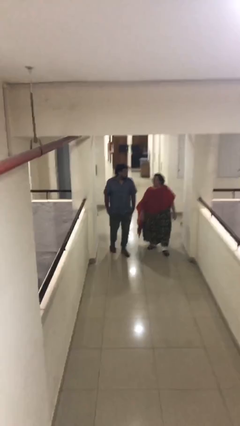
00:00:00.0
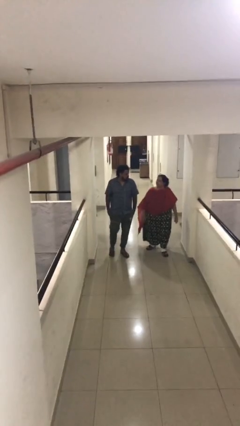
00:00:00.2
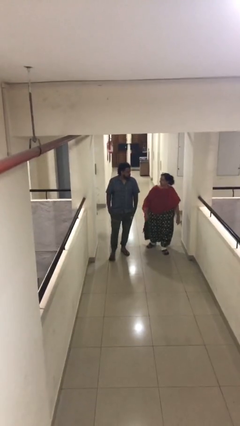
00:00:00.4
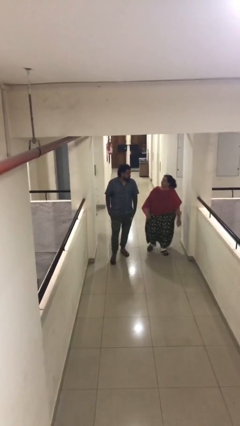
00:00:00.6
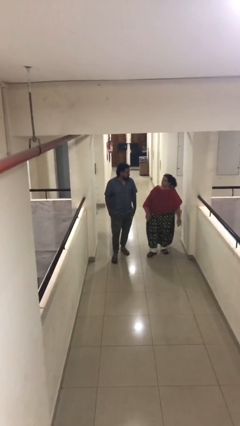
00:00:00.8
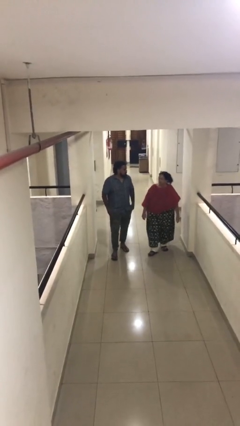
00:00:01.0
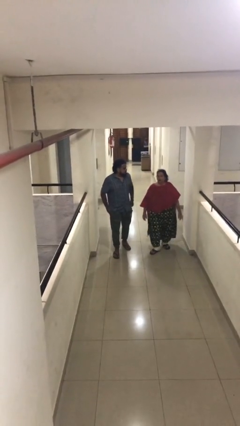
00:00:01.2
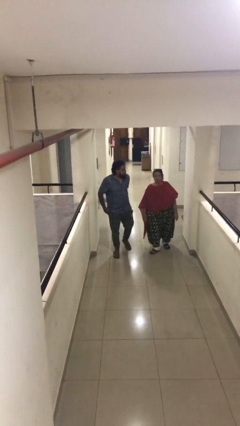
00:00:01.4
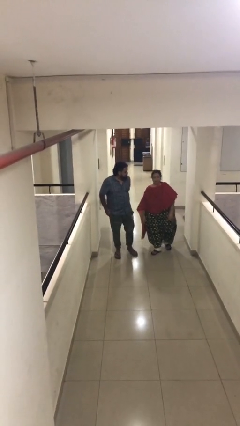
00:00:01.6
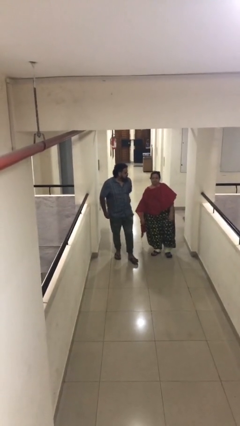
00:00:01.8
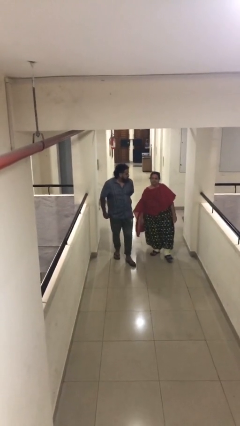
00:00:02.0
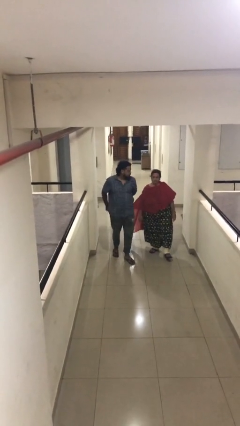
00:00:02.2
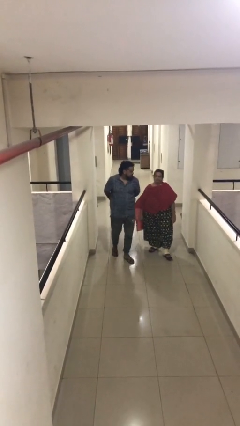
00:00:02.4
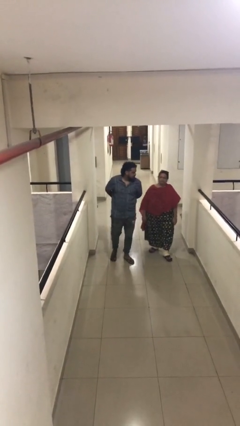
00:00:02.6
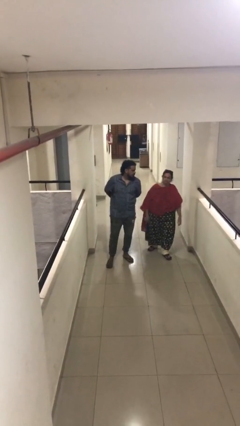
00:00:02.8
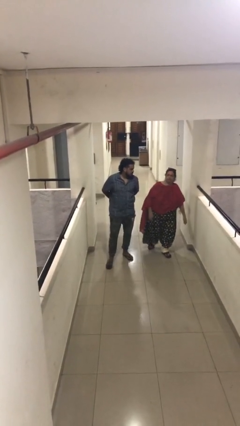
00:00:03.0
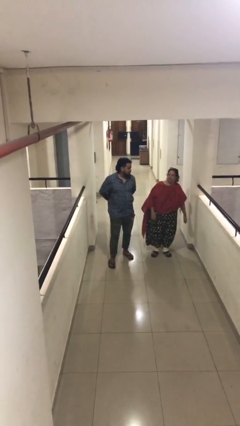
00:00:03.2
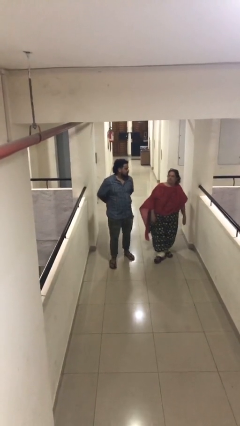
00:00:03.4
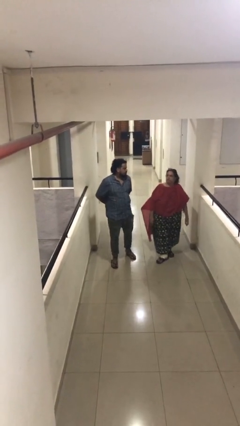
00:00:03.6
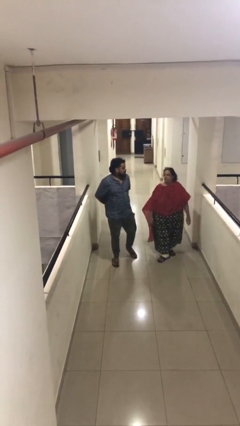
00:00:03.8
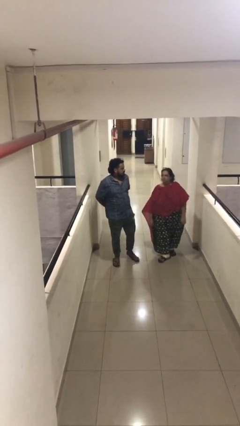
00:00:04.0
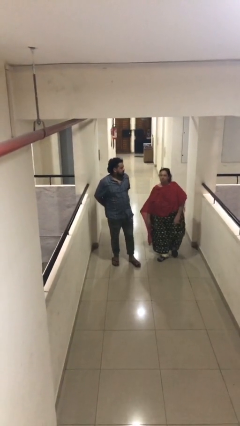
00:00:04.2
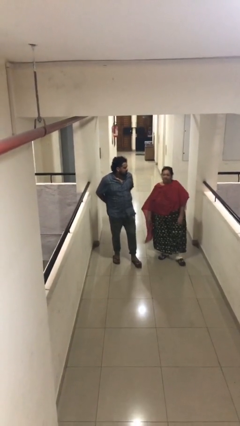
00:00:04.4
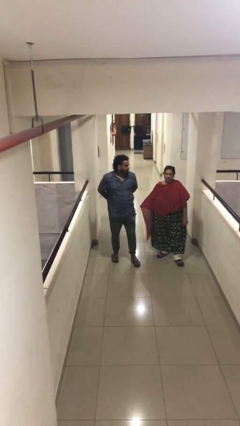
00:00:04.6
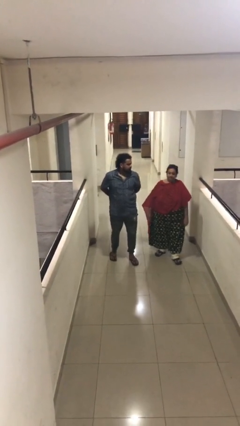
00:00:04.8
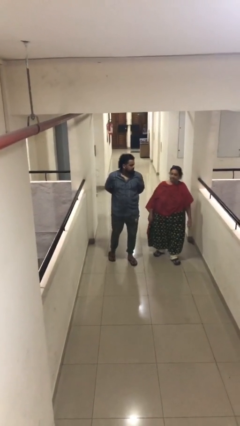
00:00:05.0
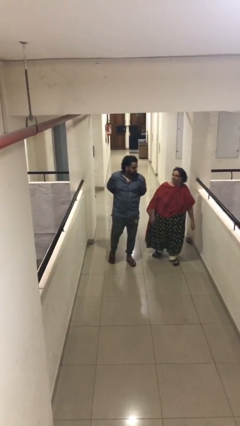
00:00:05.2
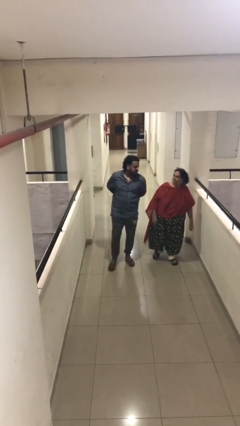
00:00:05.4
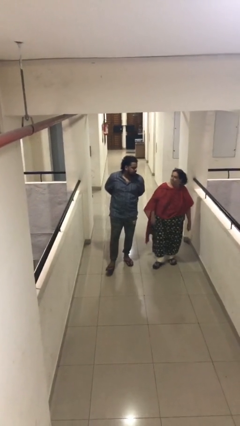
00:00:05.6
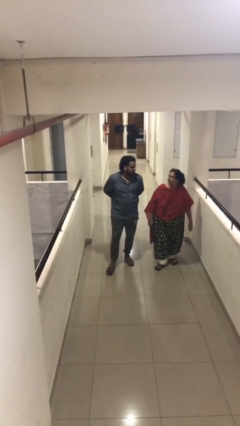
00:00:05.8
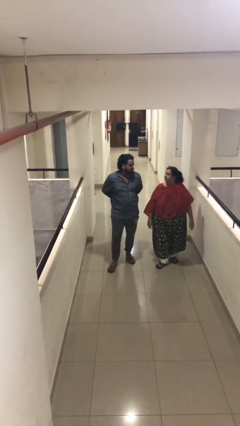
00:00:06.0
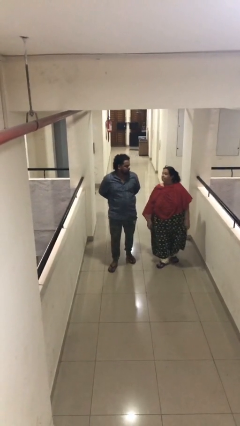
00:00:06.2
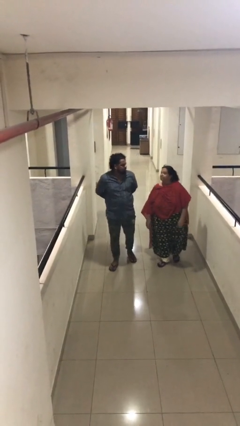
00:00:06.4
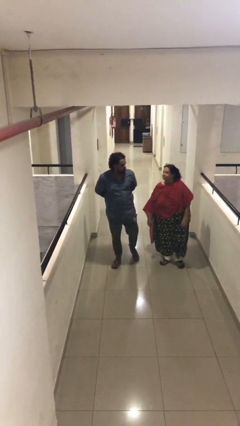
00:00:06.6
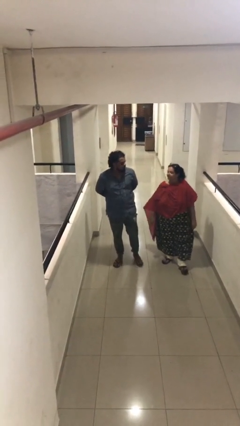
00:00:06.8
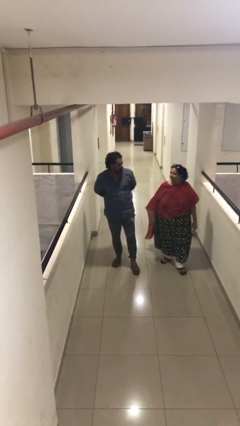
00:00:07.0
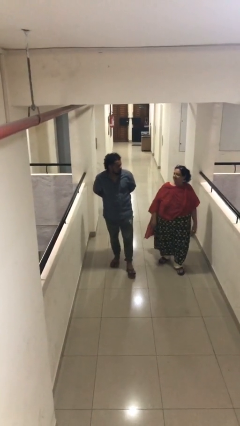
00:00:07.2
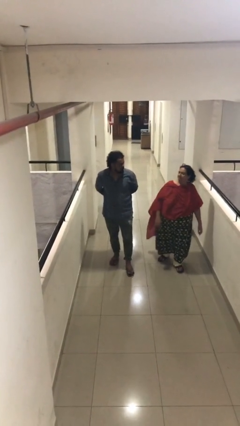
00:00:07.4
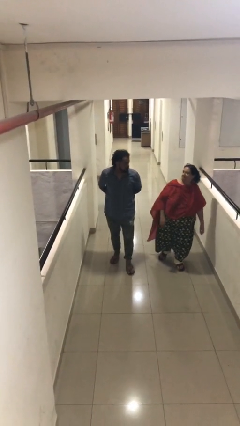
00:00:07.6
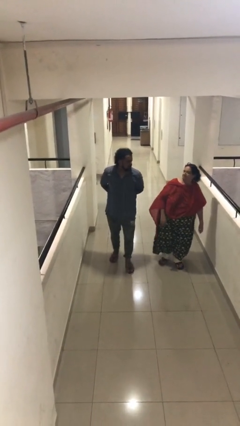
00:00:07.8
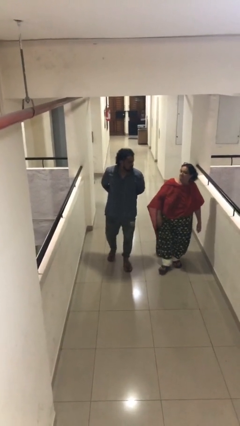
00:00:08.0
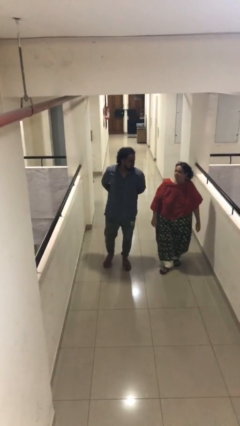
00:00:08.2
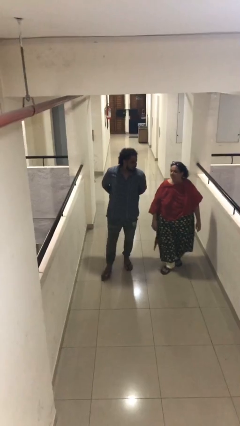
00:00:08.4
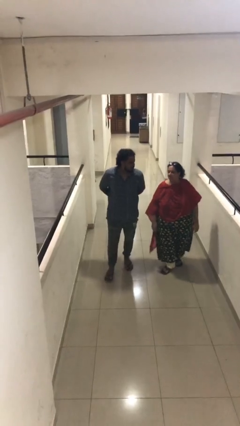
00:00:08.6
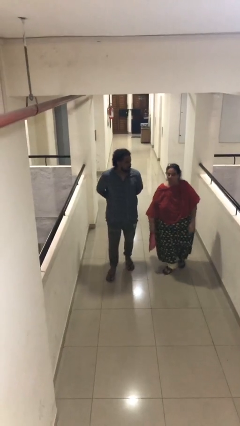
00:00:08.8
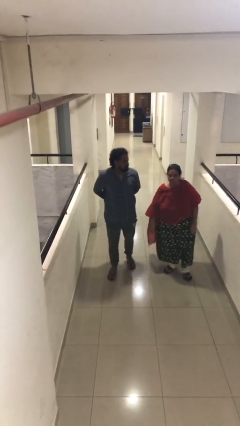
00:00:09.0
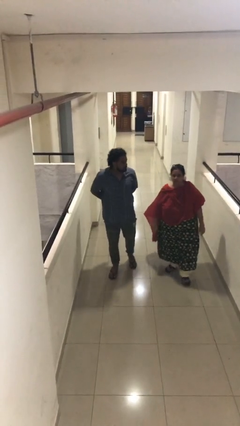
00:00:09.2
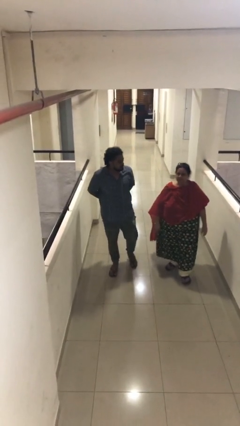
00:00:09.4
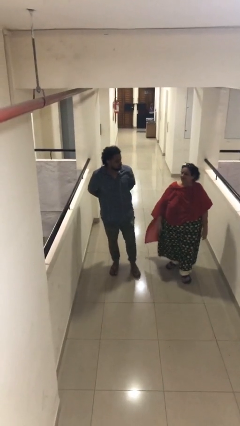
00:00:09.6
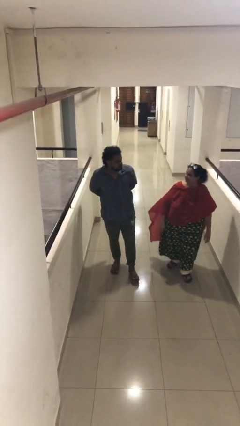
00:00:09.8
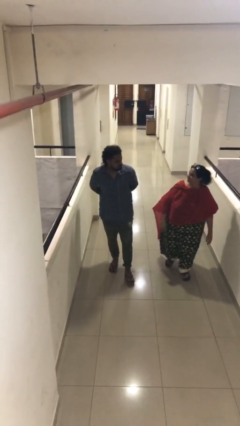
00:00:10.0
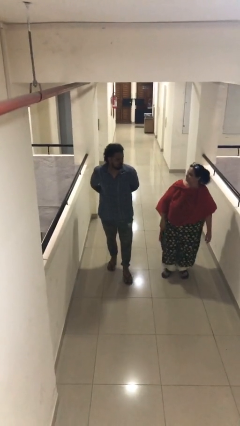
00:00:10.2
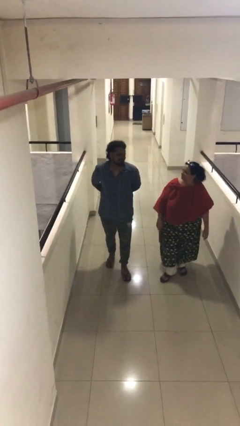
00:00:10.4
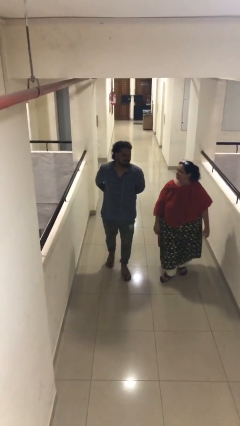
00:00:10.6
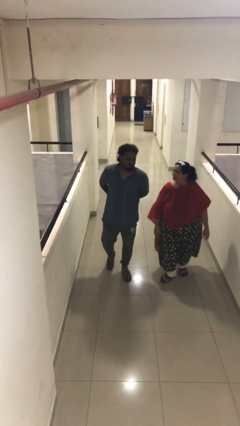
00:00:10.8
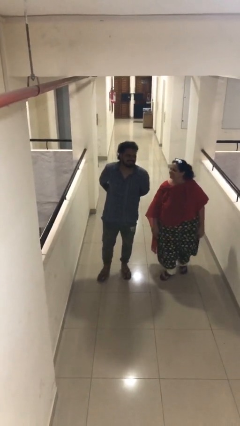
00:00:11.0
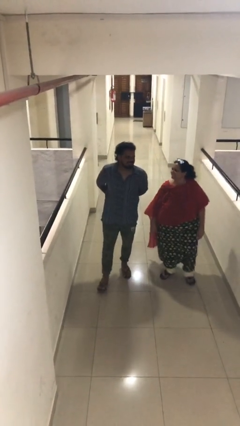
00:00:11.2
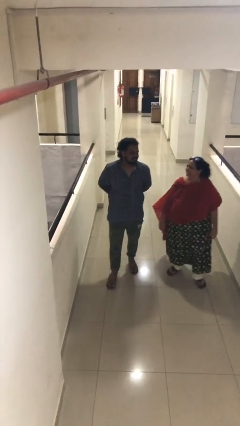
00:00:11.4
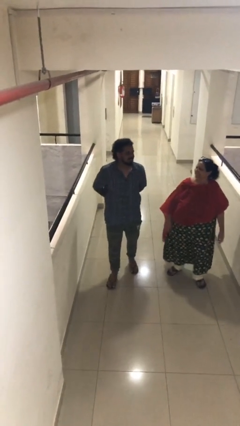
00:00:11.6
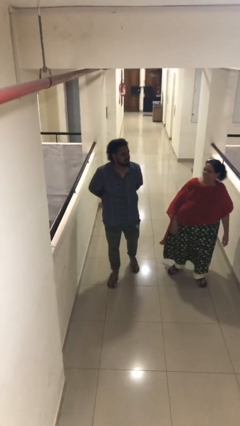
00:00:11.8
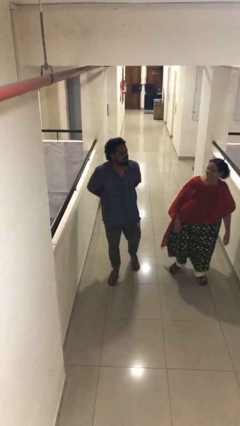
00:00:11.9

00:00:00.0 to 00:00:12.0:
person talks to person

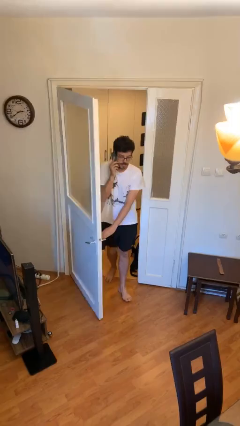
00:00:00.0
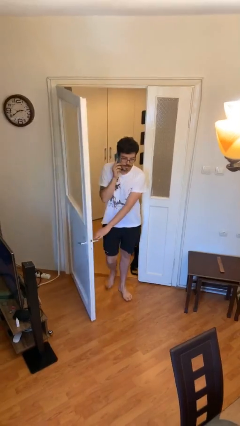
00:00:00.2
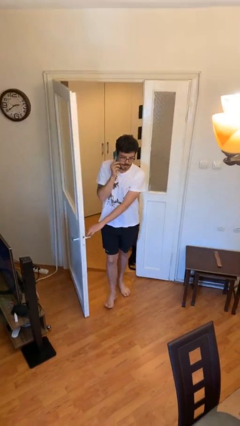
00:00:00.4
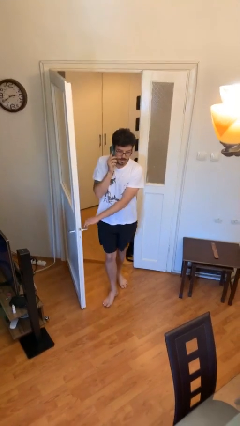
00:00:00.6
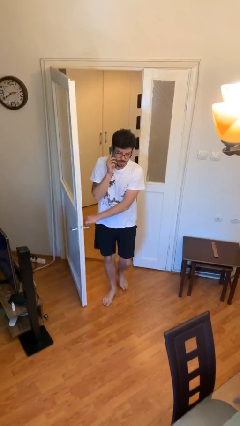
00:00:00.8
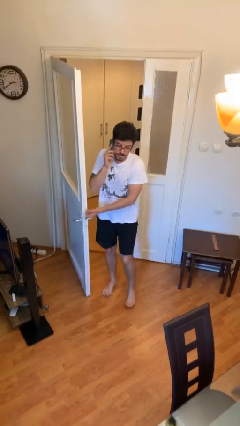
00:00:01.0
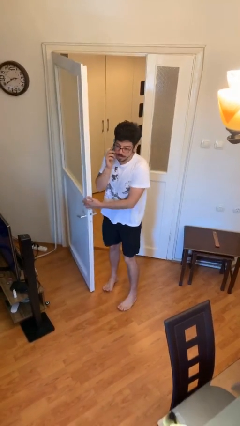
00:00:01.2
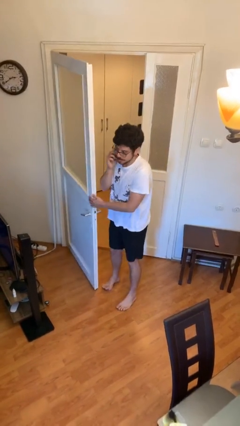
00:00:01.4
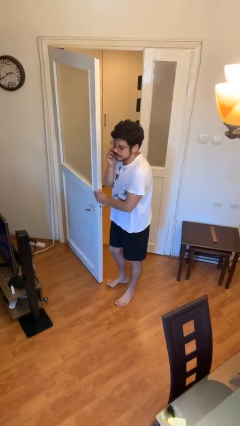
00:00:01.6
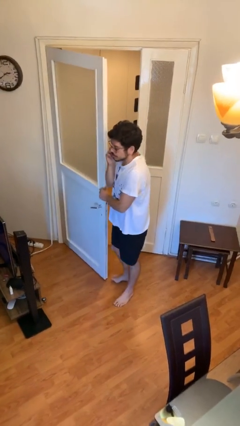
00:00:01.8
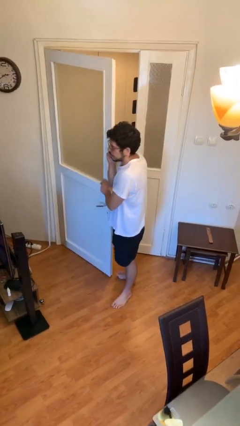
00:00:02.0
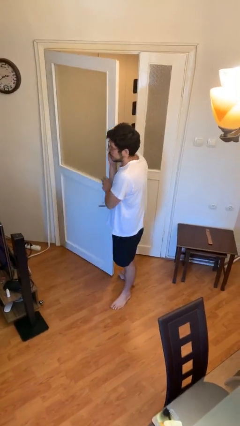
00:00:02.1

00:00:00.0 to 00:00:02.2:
person enters scene through structure

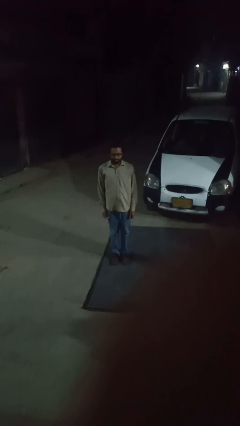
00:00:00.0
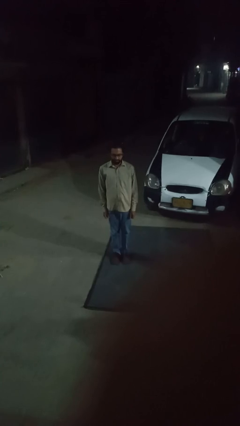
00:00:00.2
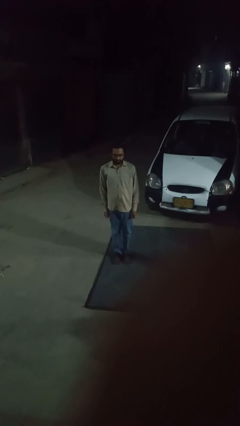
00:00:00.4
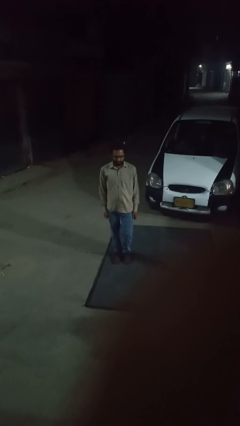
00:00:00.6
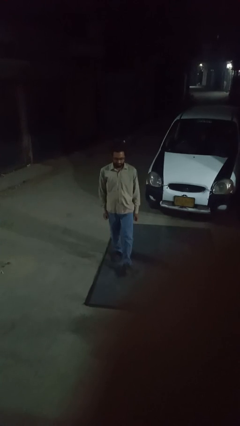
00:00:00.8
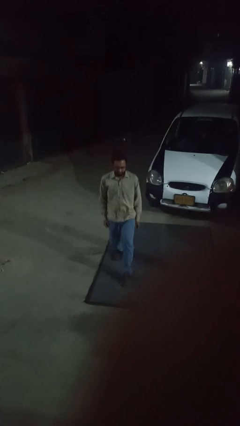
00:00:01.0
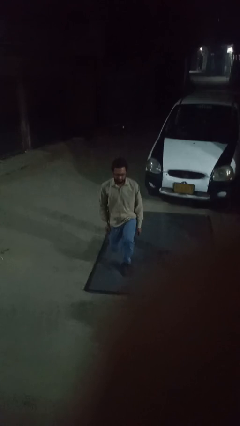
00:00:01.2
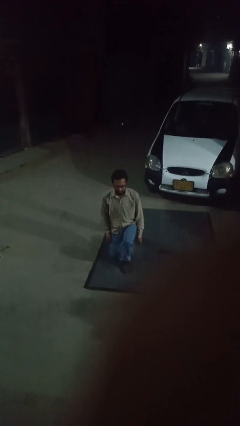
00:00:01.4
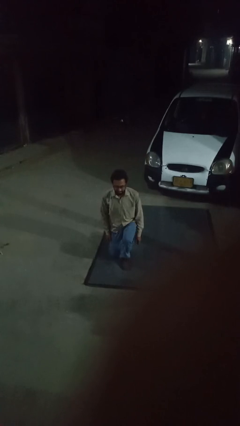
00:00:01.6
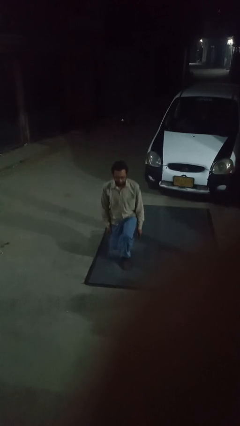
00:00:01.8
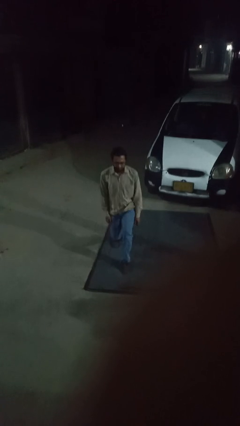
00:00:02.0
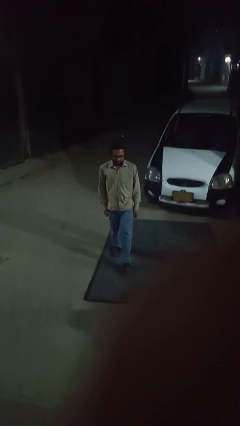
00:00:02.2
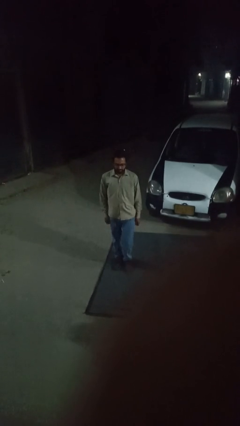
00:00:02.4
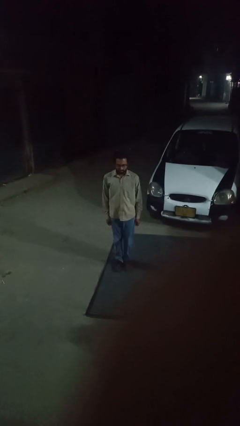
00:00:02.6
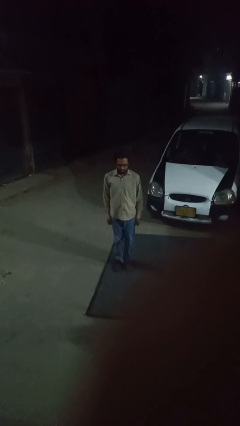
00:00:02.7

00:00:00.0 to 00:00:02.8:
person exercises with lunges

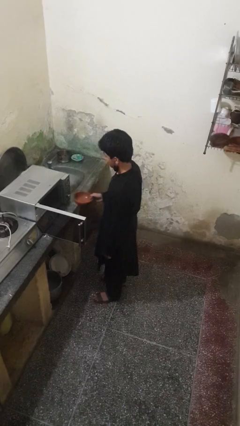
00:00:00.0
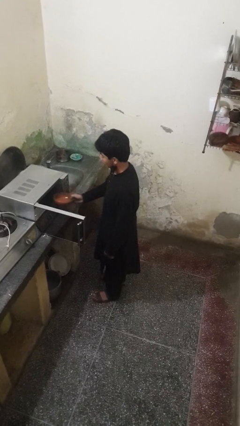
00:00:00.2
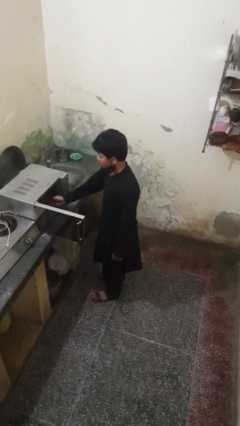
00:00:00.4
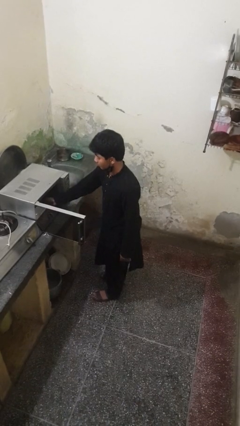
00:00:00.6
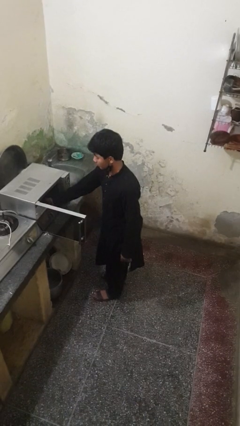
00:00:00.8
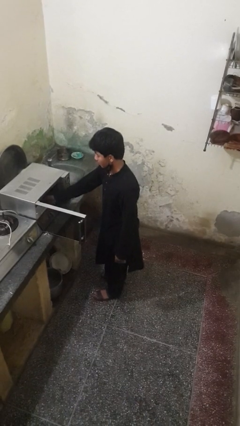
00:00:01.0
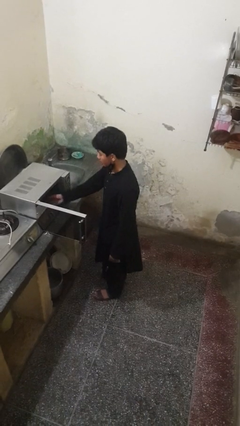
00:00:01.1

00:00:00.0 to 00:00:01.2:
person puts object into microwave
